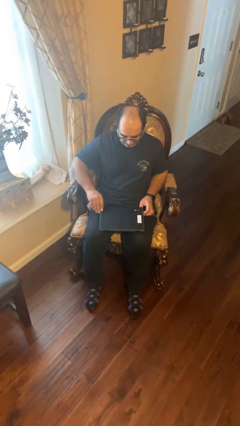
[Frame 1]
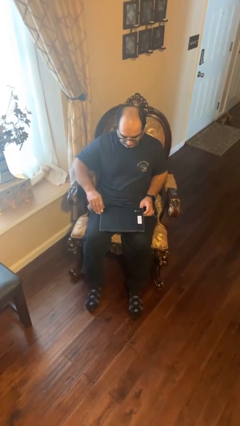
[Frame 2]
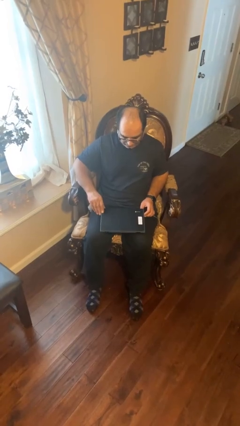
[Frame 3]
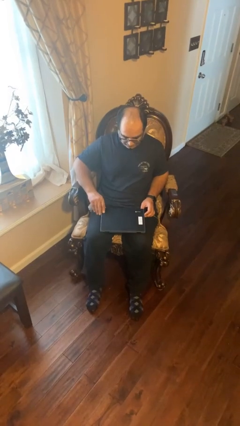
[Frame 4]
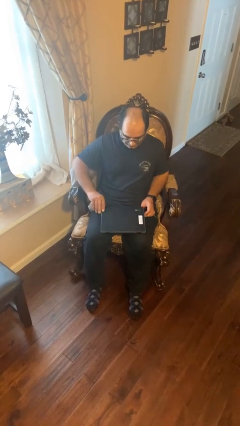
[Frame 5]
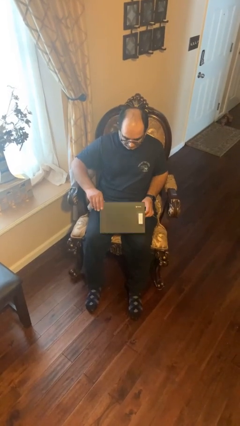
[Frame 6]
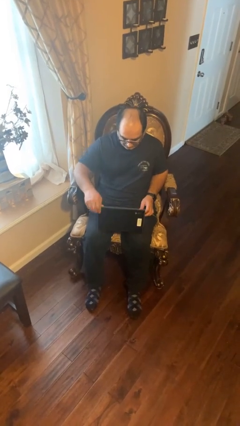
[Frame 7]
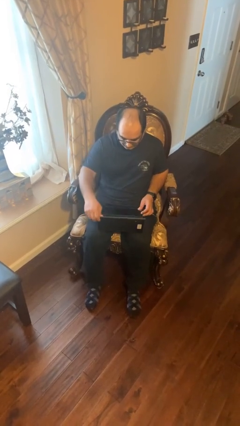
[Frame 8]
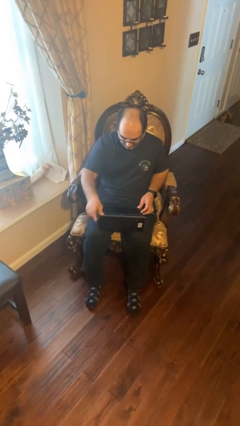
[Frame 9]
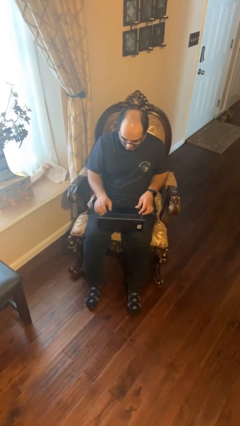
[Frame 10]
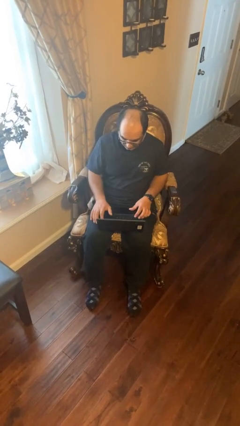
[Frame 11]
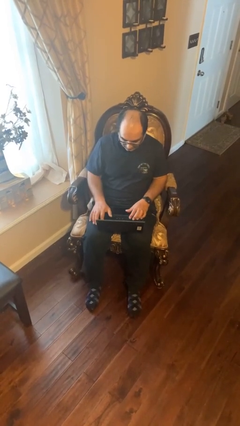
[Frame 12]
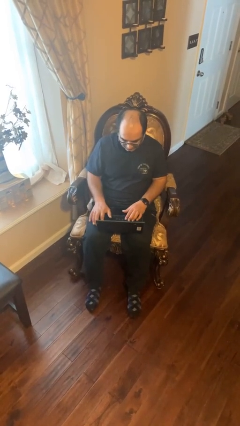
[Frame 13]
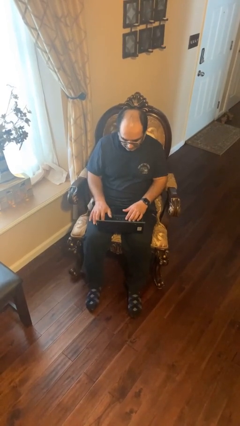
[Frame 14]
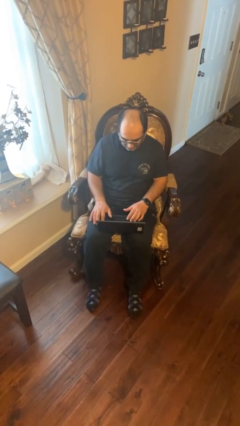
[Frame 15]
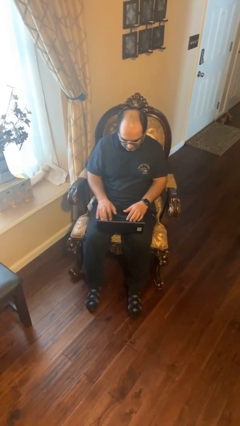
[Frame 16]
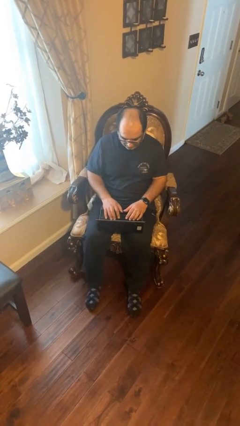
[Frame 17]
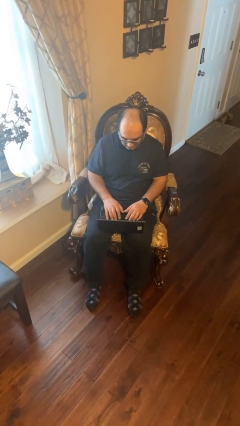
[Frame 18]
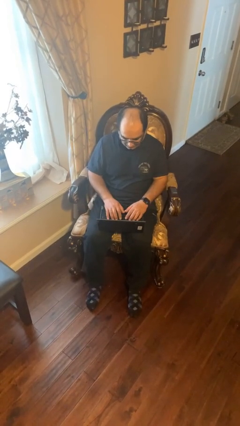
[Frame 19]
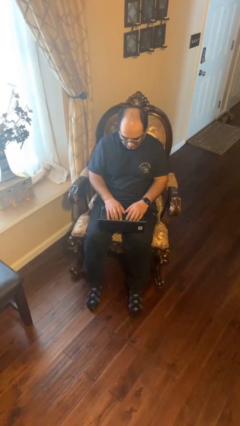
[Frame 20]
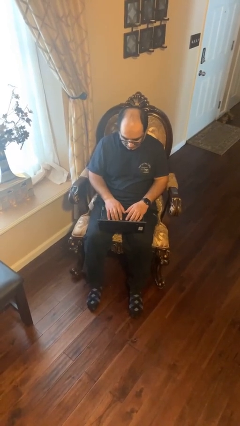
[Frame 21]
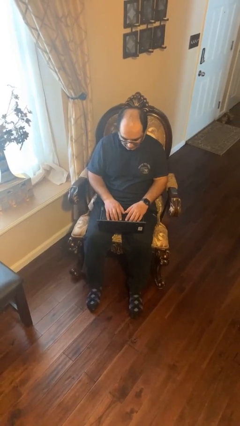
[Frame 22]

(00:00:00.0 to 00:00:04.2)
person interacts with laptop

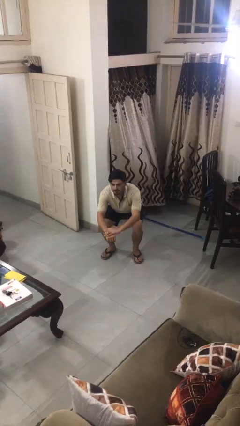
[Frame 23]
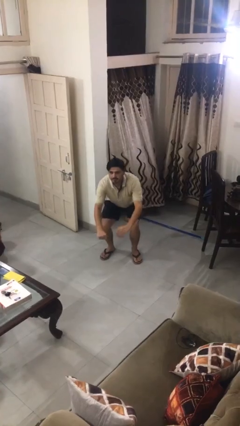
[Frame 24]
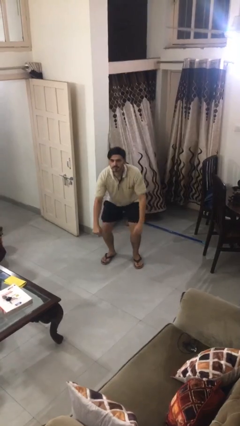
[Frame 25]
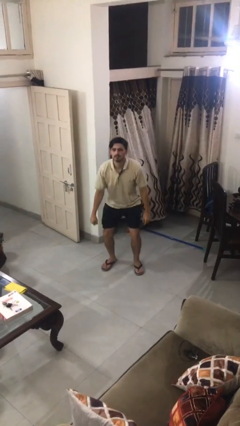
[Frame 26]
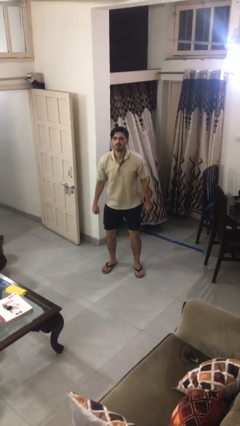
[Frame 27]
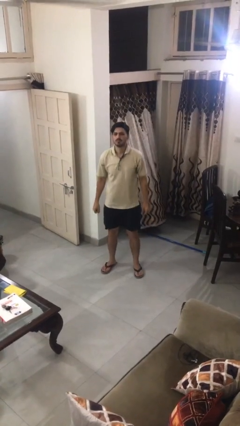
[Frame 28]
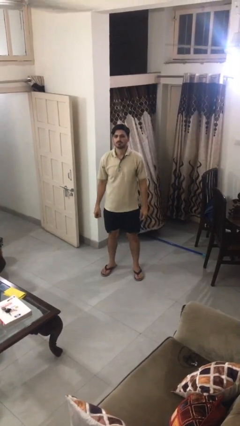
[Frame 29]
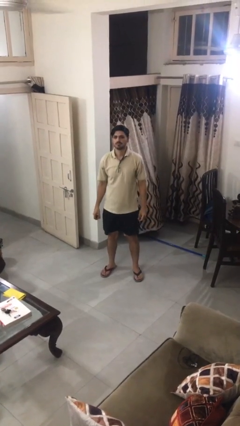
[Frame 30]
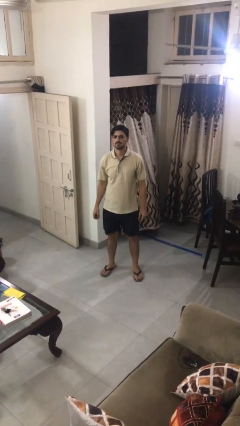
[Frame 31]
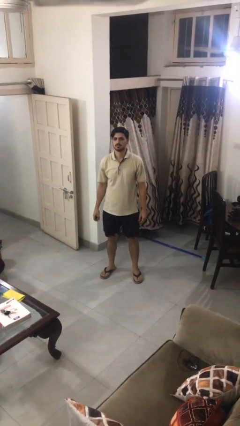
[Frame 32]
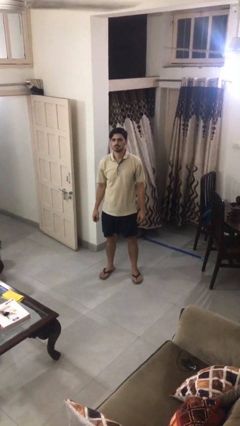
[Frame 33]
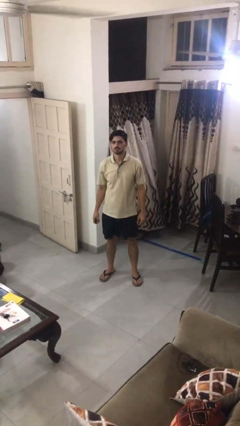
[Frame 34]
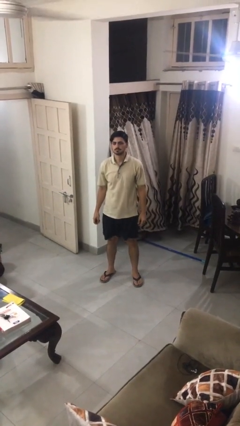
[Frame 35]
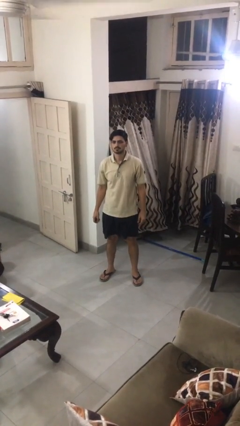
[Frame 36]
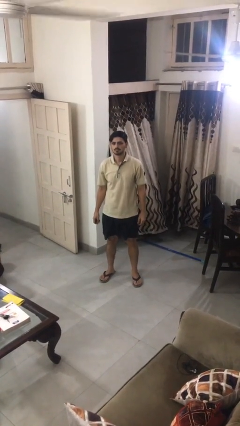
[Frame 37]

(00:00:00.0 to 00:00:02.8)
person stands up

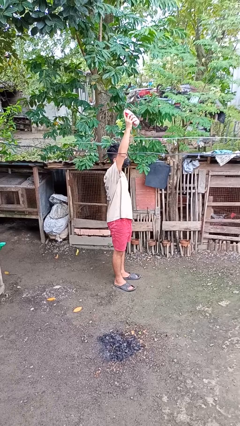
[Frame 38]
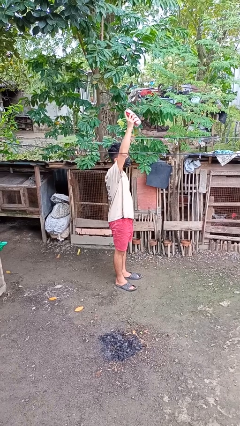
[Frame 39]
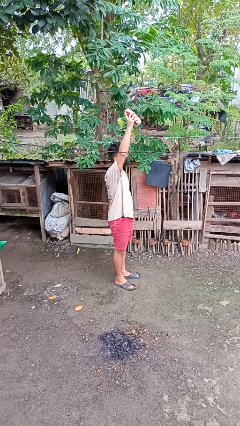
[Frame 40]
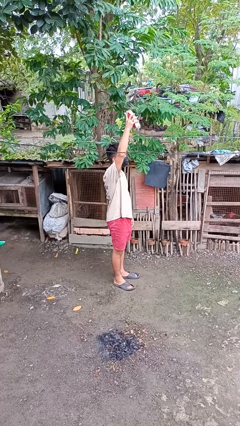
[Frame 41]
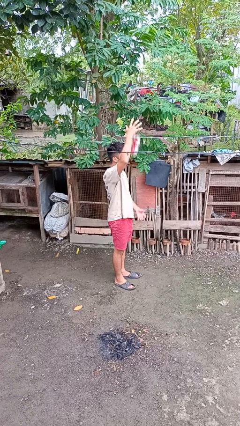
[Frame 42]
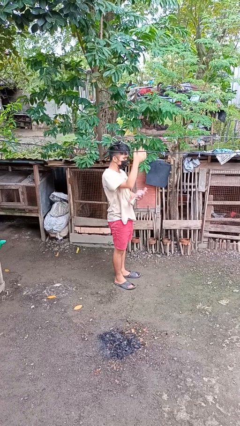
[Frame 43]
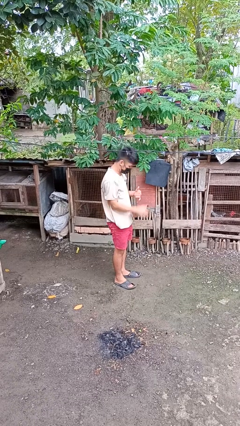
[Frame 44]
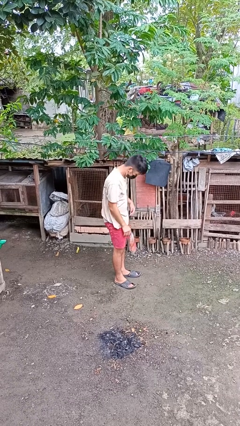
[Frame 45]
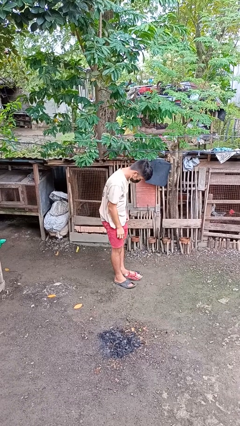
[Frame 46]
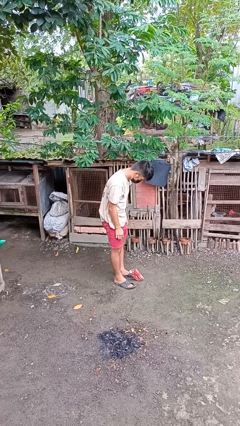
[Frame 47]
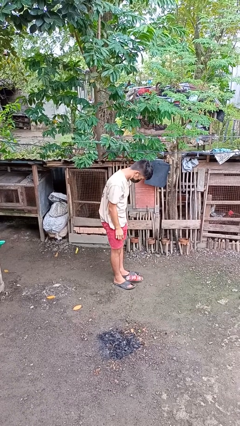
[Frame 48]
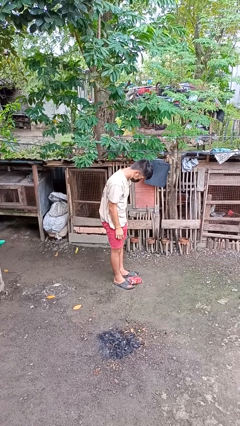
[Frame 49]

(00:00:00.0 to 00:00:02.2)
person drops object

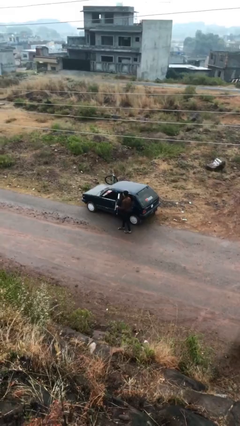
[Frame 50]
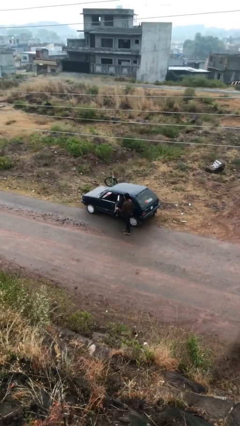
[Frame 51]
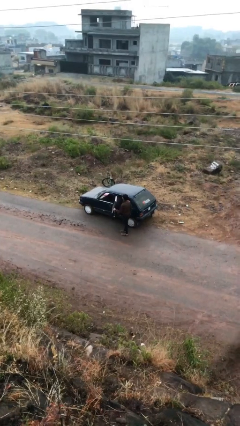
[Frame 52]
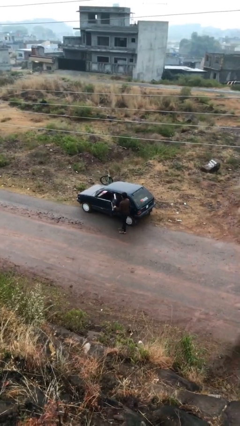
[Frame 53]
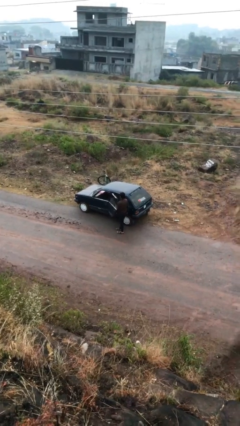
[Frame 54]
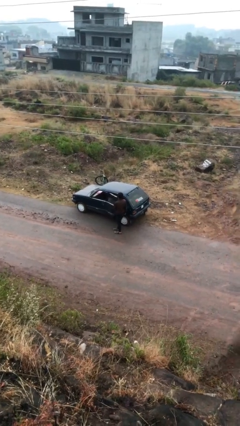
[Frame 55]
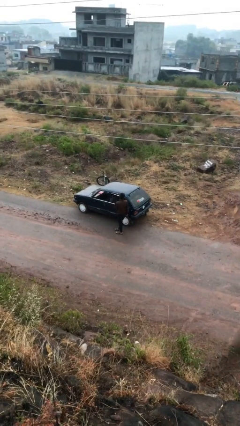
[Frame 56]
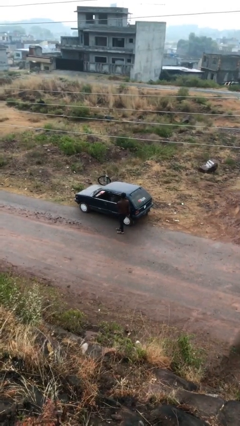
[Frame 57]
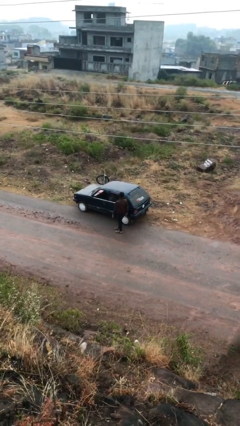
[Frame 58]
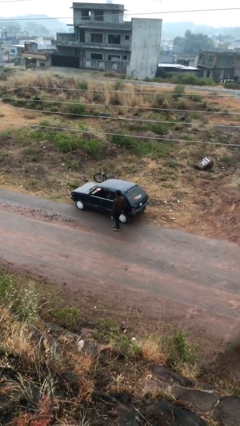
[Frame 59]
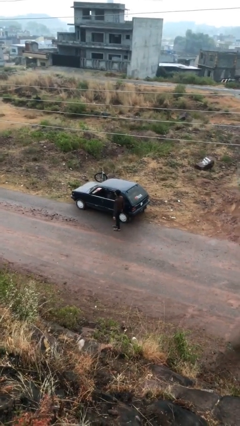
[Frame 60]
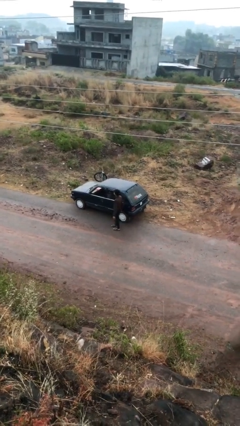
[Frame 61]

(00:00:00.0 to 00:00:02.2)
person closes car door

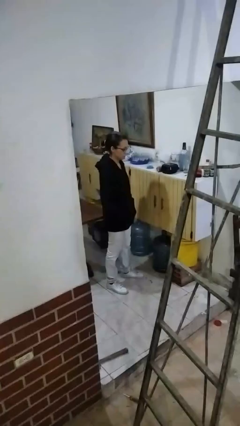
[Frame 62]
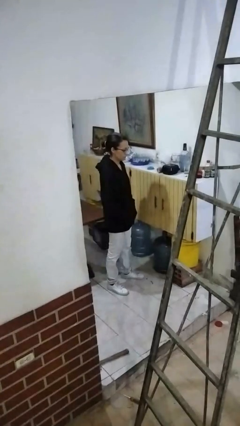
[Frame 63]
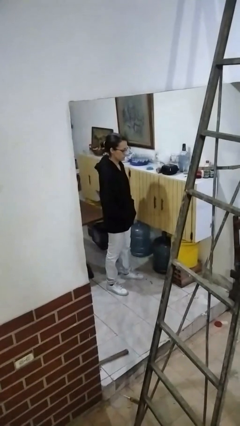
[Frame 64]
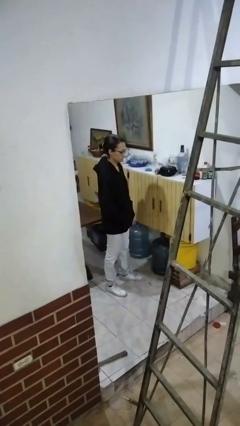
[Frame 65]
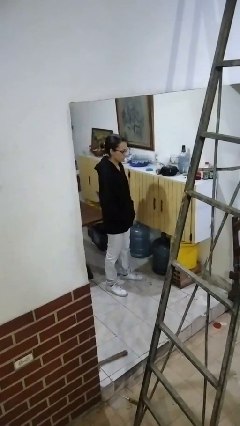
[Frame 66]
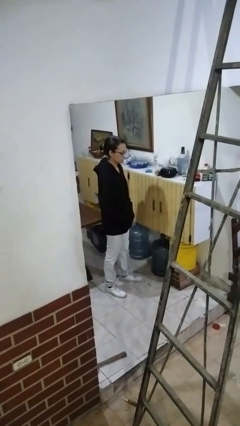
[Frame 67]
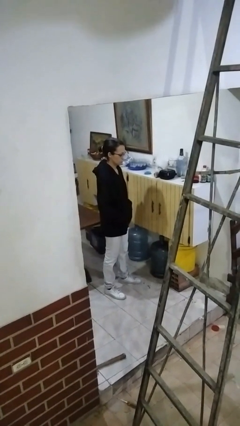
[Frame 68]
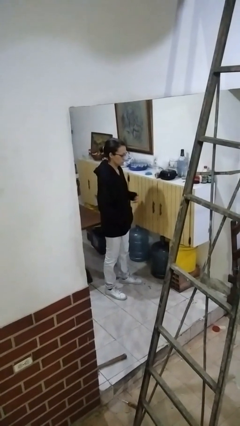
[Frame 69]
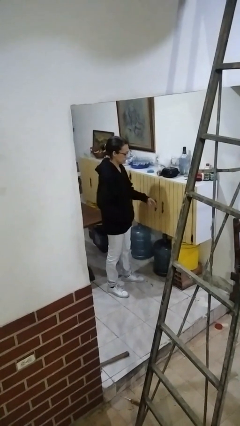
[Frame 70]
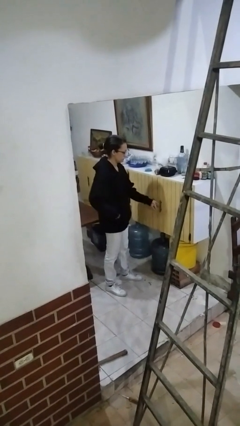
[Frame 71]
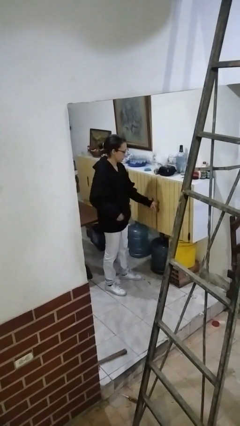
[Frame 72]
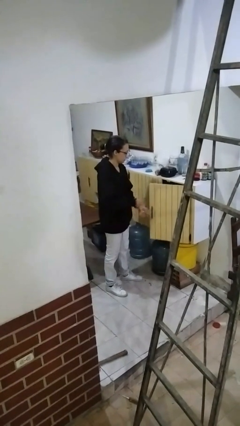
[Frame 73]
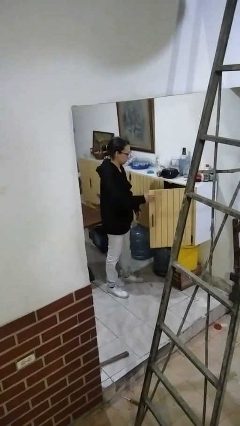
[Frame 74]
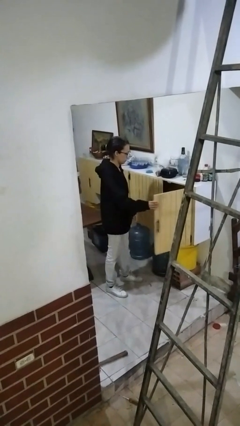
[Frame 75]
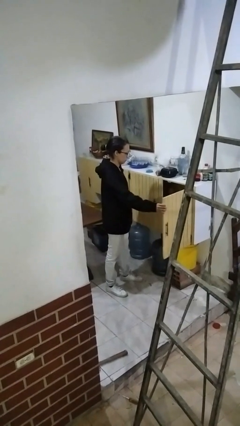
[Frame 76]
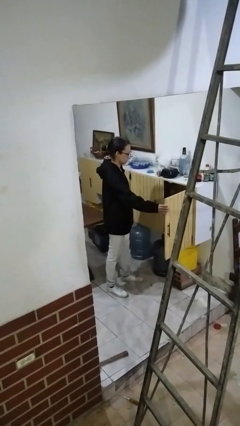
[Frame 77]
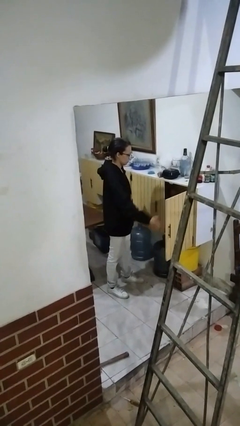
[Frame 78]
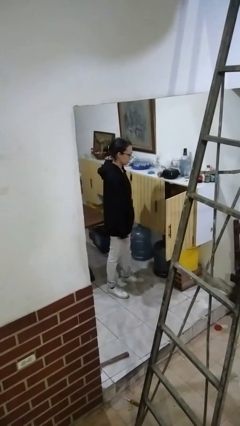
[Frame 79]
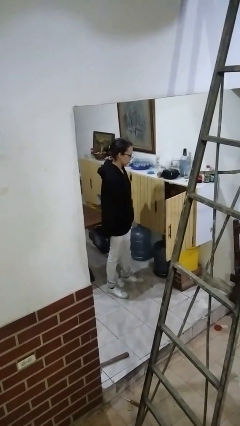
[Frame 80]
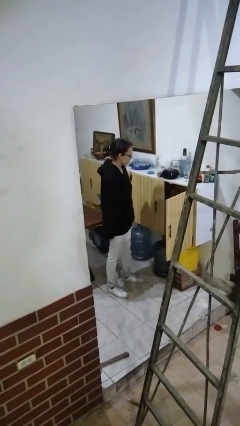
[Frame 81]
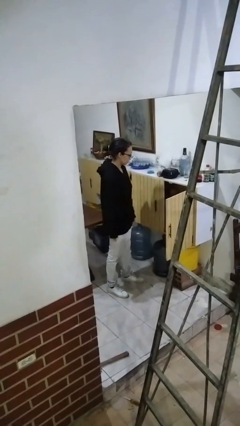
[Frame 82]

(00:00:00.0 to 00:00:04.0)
person opens cabinet

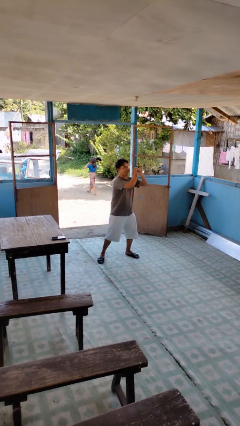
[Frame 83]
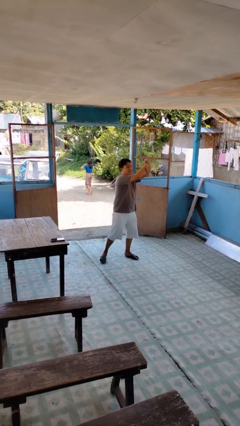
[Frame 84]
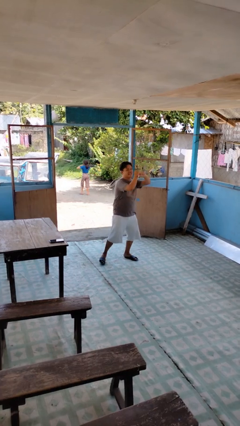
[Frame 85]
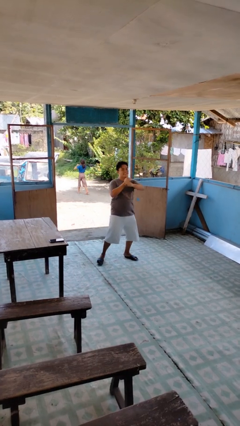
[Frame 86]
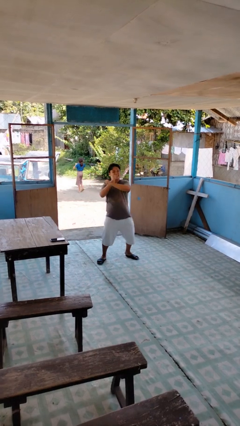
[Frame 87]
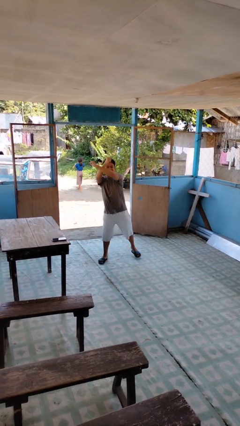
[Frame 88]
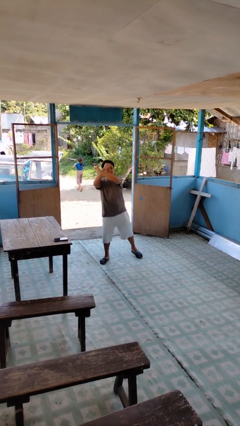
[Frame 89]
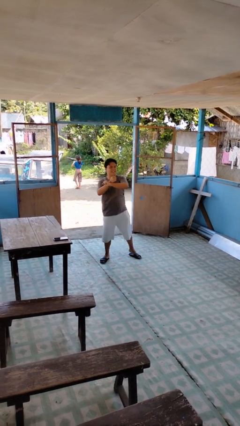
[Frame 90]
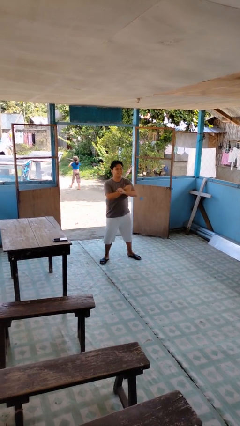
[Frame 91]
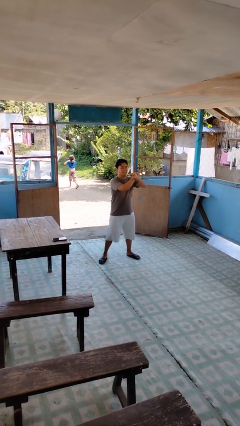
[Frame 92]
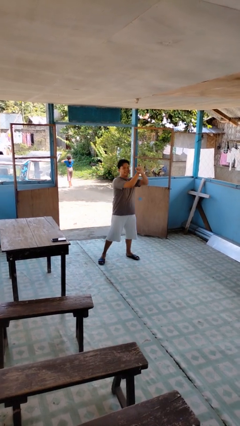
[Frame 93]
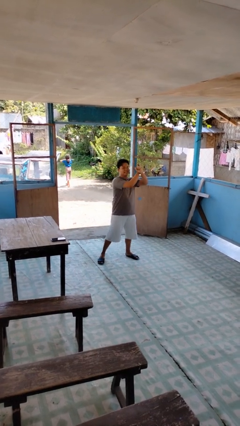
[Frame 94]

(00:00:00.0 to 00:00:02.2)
person dances in place
